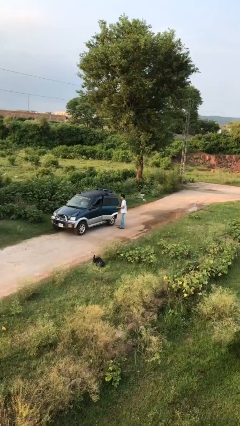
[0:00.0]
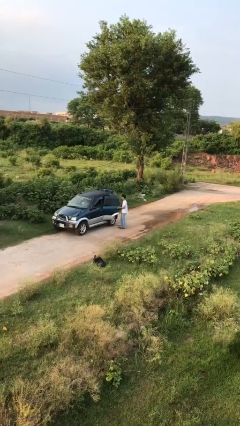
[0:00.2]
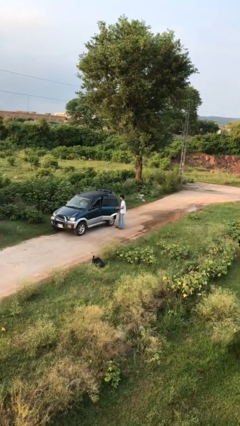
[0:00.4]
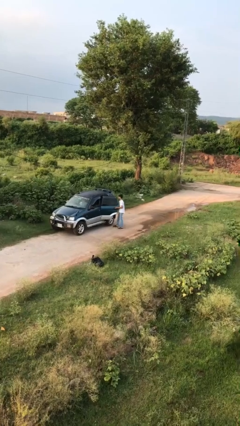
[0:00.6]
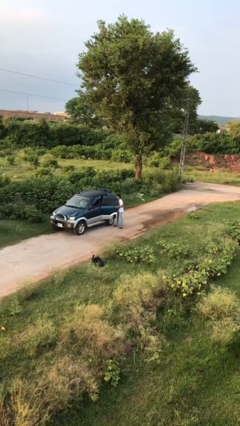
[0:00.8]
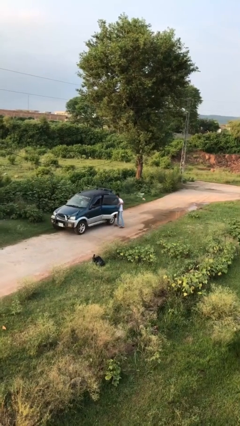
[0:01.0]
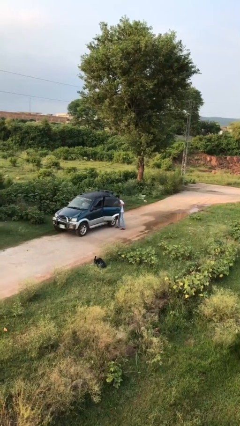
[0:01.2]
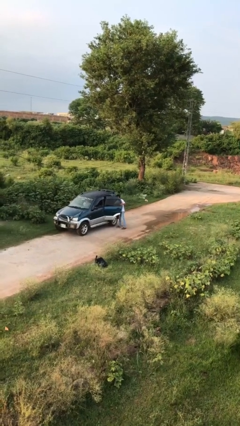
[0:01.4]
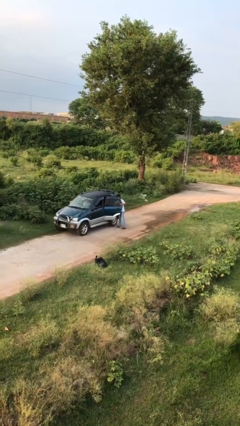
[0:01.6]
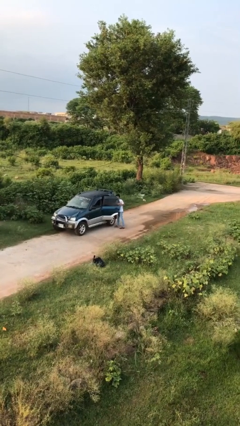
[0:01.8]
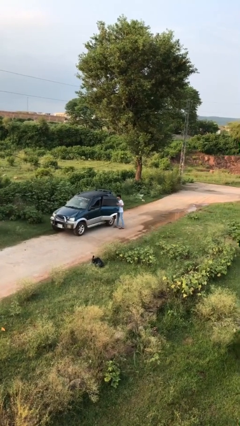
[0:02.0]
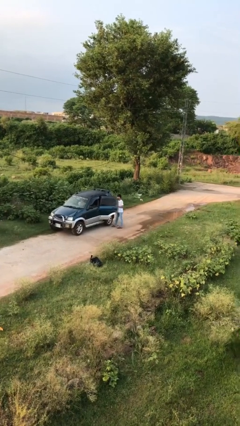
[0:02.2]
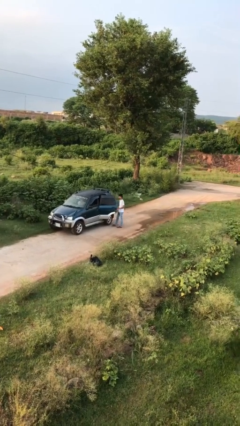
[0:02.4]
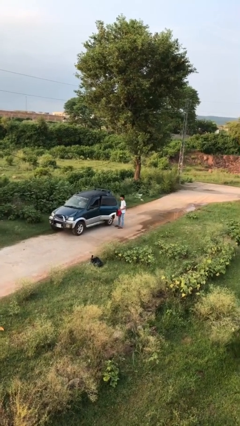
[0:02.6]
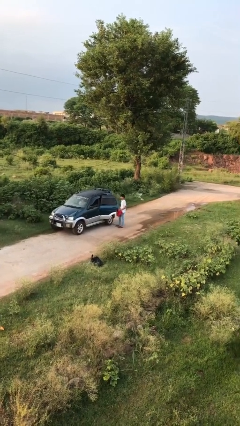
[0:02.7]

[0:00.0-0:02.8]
person unloads car

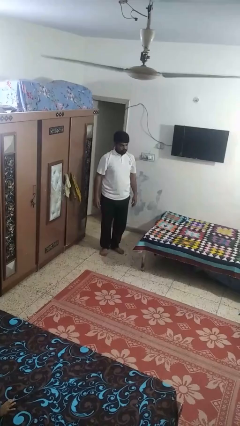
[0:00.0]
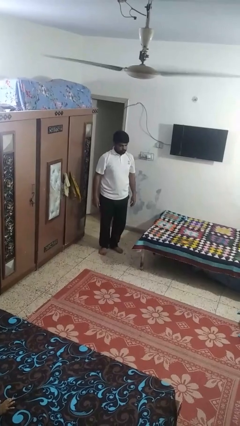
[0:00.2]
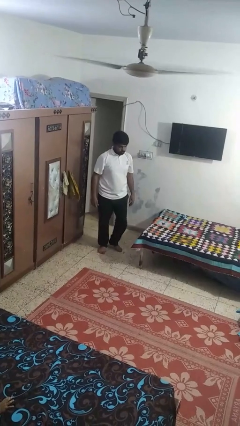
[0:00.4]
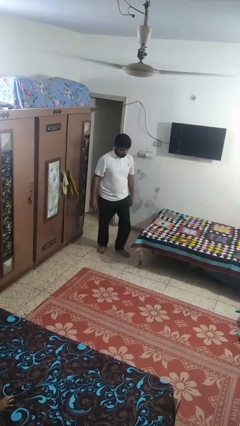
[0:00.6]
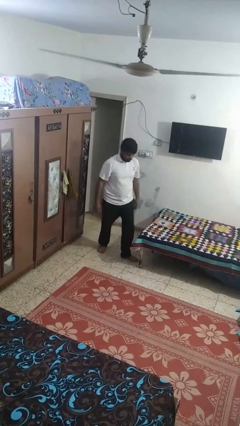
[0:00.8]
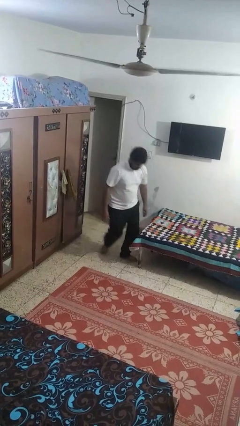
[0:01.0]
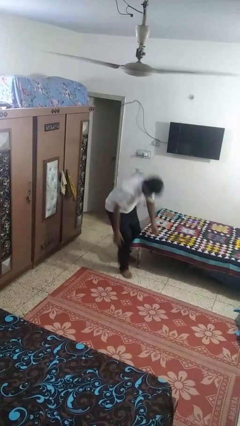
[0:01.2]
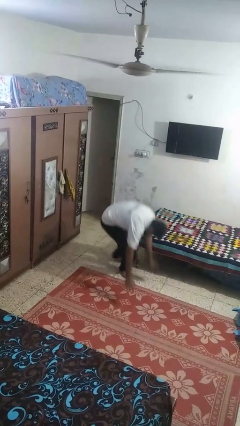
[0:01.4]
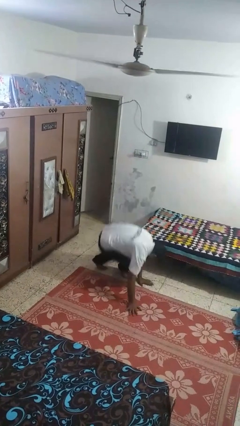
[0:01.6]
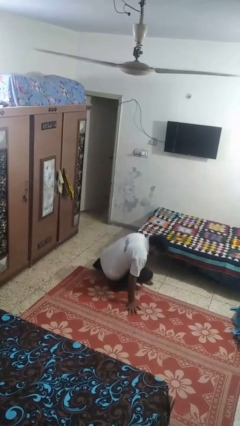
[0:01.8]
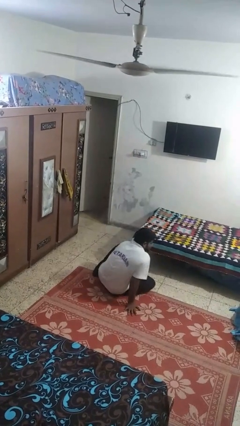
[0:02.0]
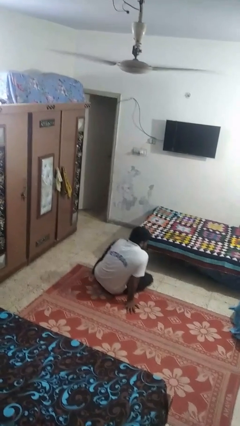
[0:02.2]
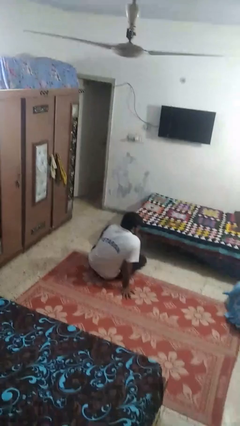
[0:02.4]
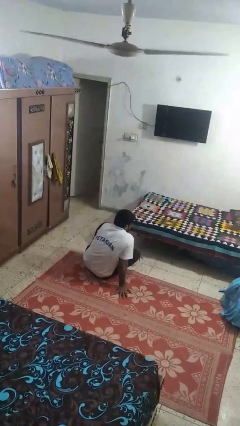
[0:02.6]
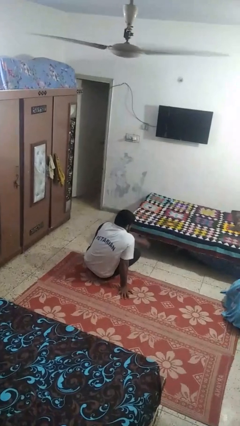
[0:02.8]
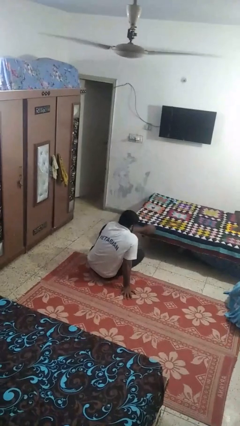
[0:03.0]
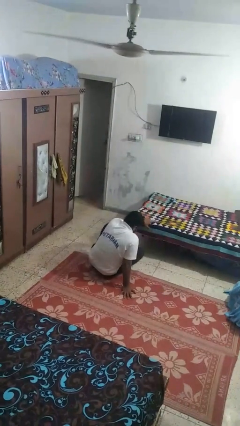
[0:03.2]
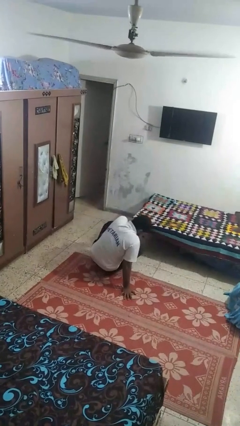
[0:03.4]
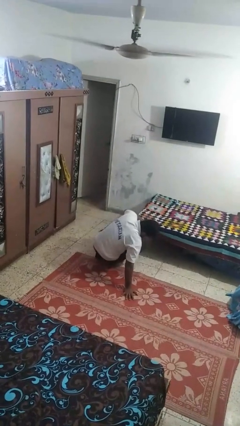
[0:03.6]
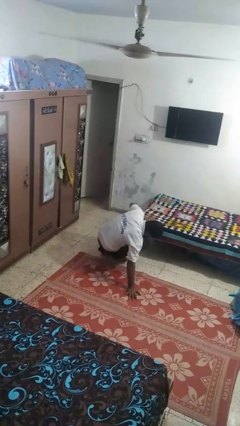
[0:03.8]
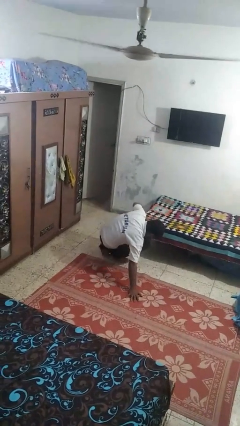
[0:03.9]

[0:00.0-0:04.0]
person trips on object on floor

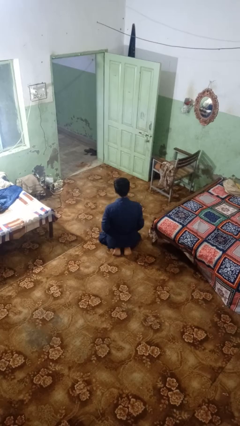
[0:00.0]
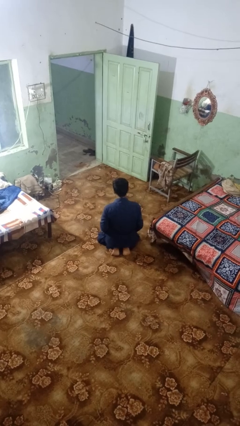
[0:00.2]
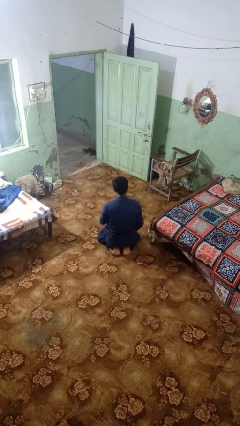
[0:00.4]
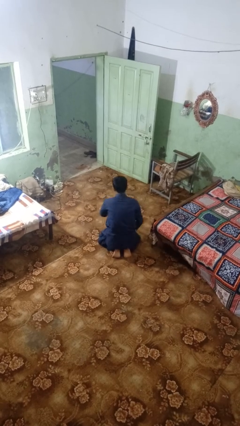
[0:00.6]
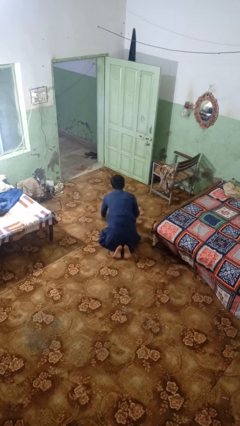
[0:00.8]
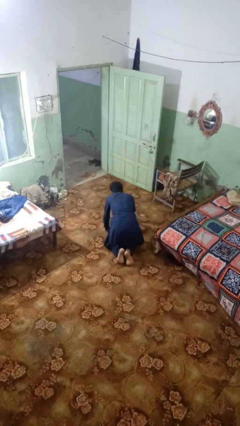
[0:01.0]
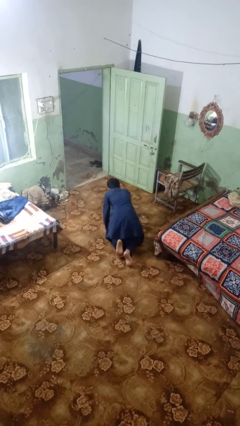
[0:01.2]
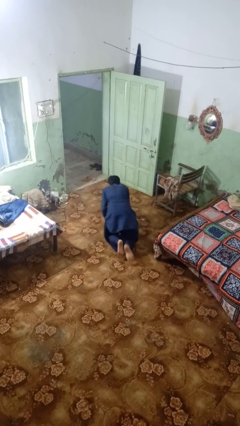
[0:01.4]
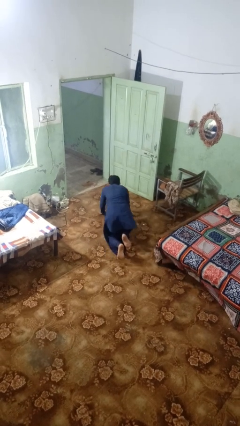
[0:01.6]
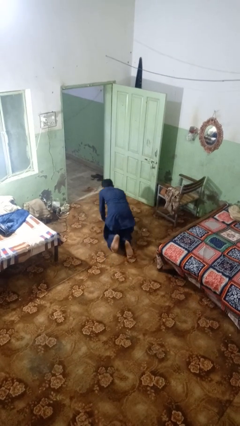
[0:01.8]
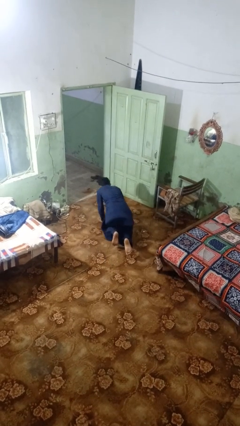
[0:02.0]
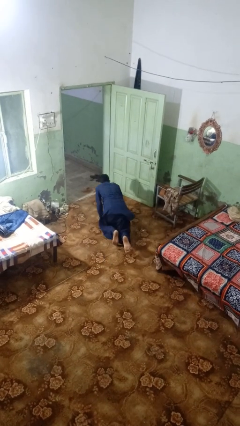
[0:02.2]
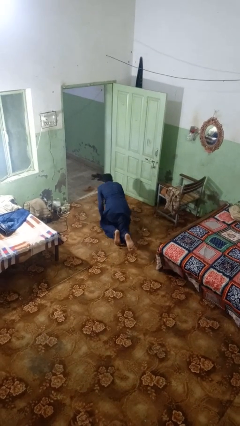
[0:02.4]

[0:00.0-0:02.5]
person crawls

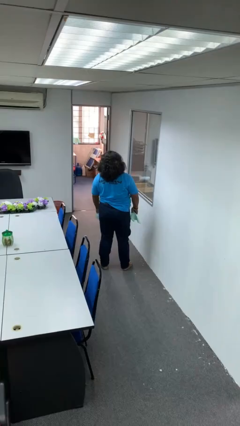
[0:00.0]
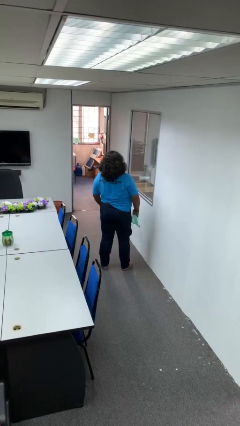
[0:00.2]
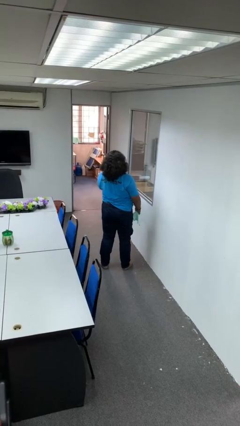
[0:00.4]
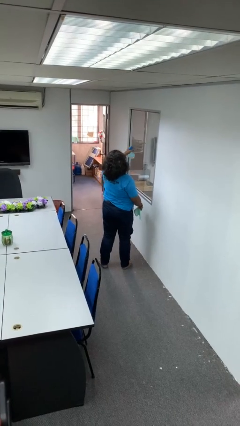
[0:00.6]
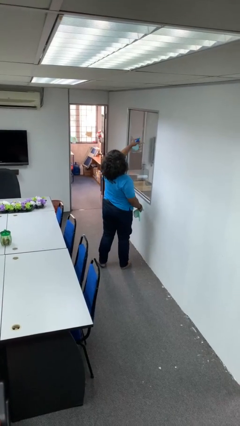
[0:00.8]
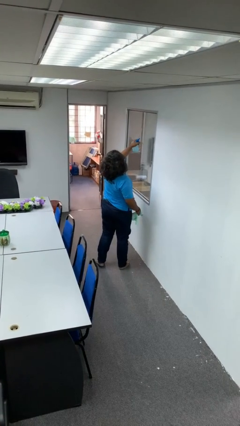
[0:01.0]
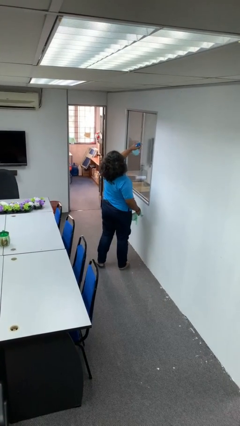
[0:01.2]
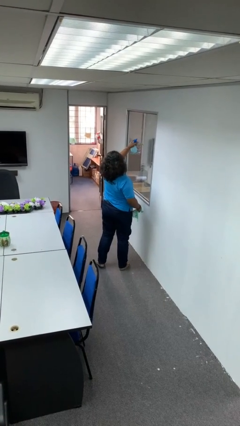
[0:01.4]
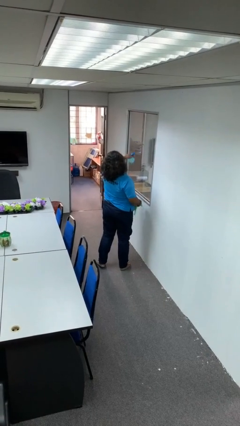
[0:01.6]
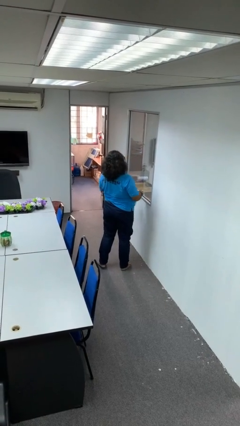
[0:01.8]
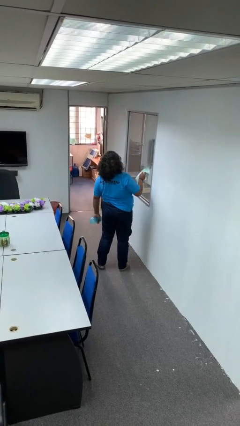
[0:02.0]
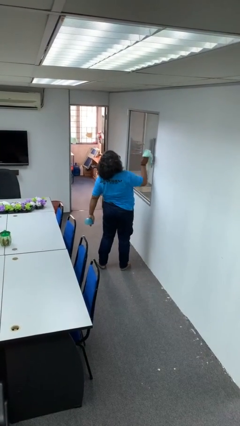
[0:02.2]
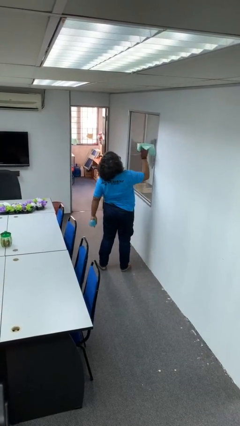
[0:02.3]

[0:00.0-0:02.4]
person sprays from bottle

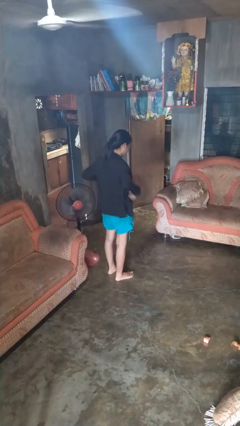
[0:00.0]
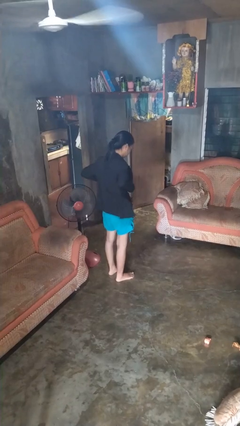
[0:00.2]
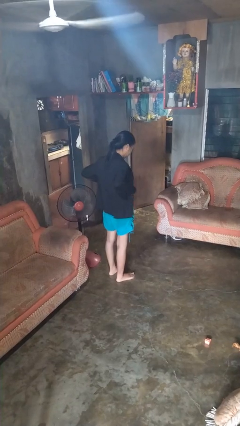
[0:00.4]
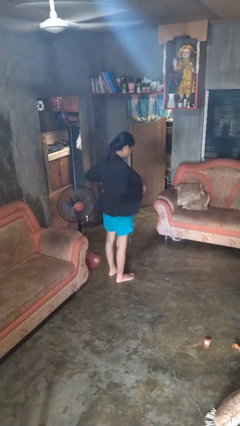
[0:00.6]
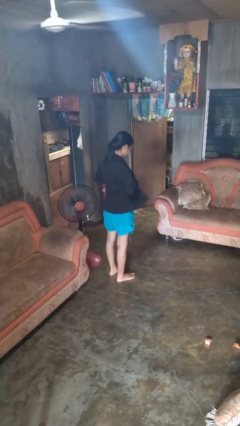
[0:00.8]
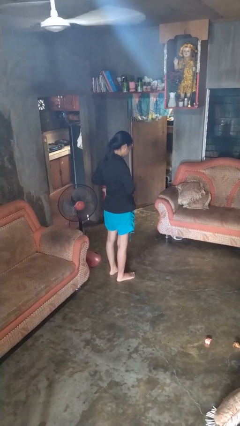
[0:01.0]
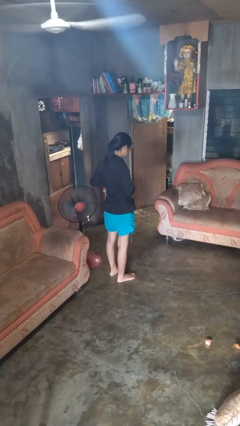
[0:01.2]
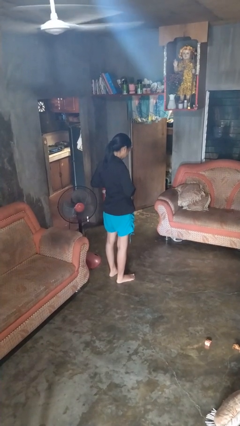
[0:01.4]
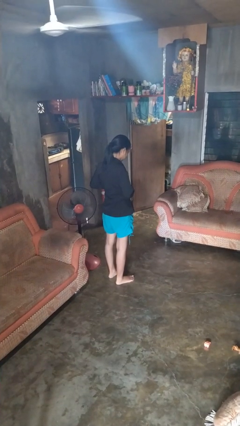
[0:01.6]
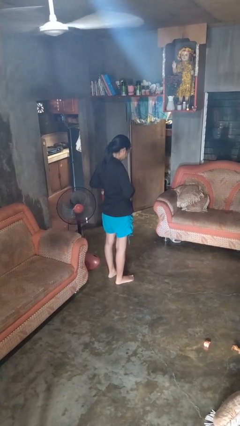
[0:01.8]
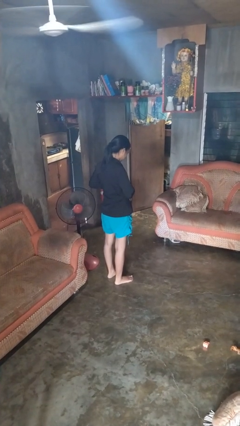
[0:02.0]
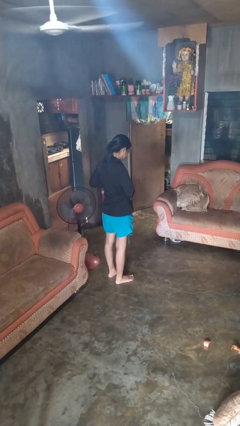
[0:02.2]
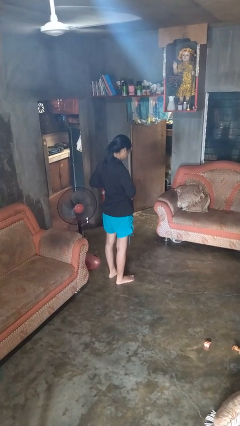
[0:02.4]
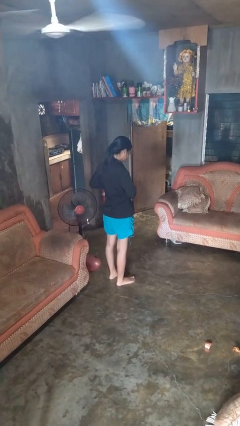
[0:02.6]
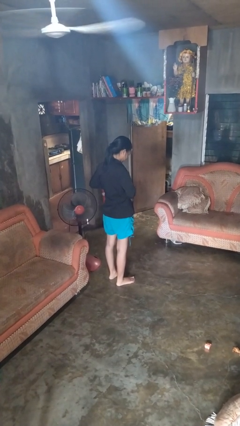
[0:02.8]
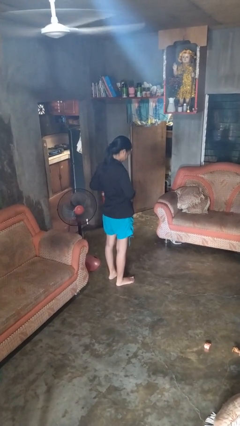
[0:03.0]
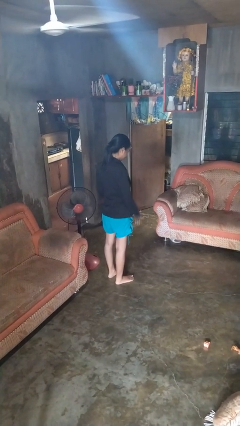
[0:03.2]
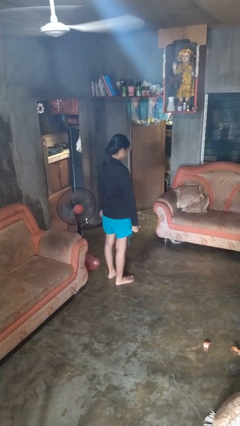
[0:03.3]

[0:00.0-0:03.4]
person buttons shirt

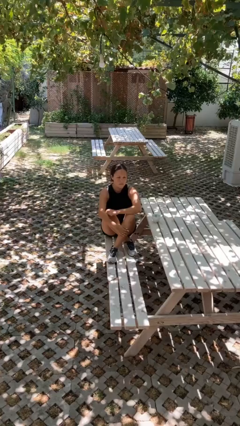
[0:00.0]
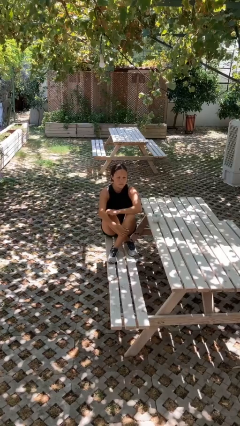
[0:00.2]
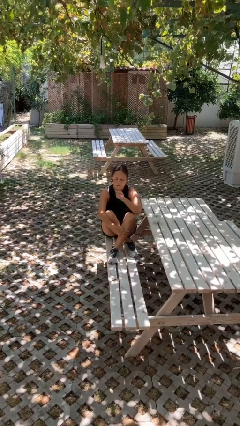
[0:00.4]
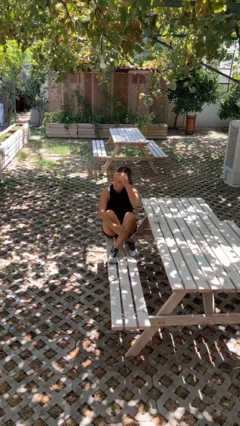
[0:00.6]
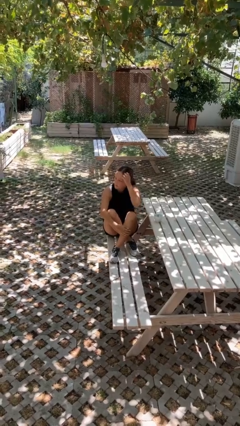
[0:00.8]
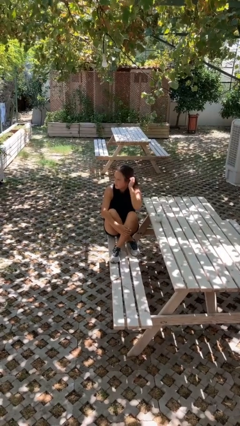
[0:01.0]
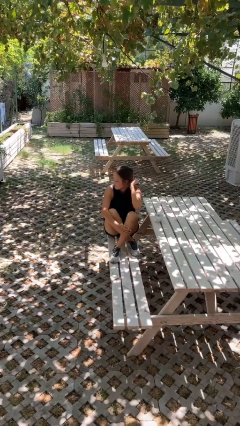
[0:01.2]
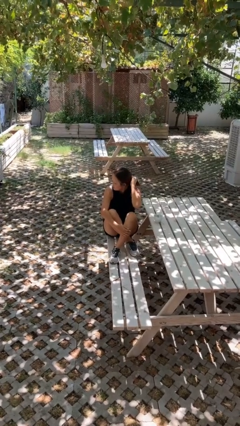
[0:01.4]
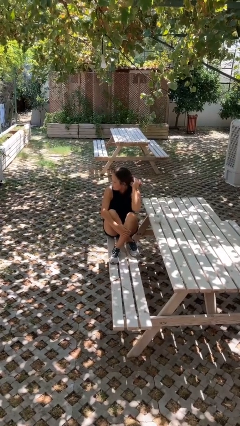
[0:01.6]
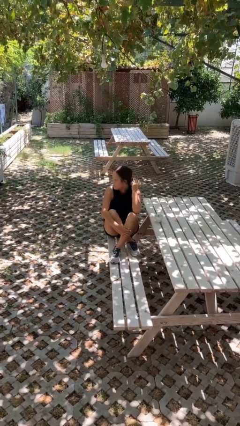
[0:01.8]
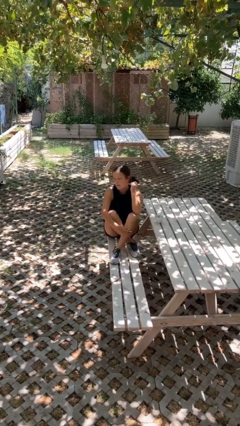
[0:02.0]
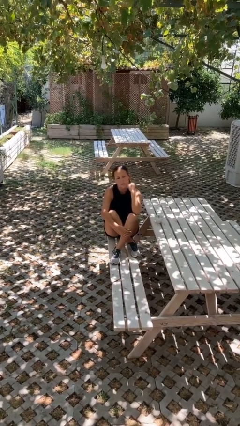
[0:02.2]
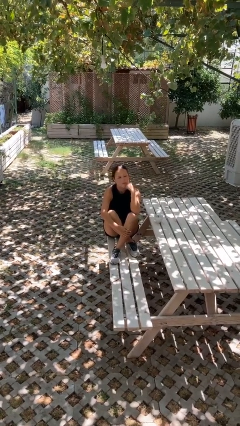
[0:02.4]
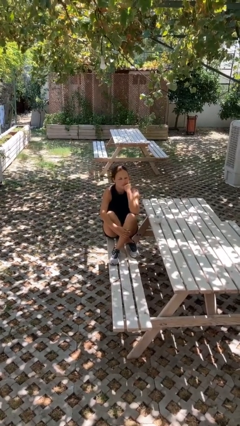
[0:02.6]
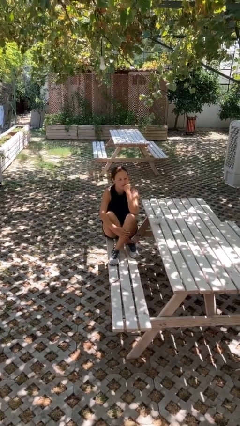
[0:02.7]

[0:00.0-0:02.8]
person strokes hair
